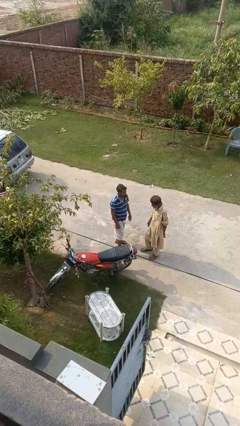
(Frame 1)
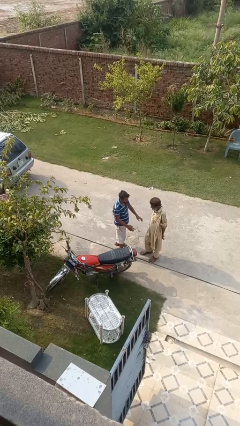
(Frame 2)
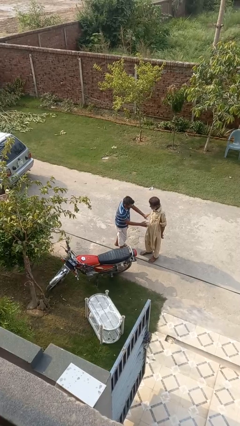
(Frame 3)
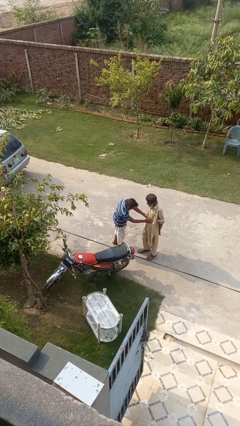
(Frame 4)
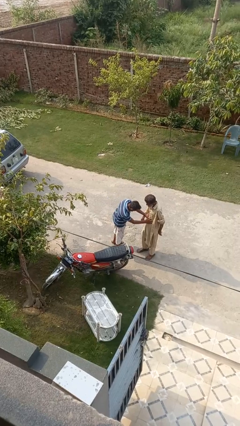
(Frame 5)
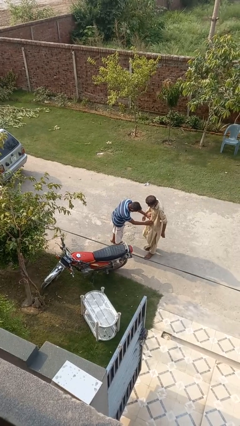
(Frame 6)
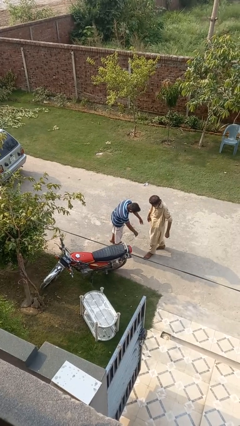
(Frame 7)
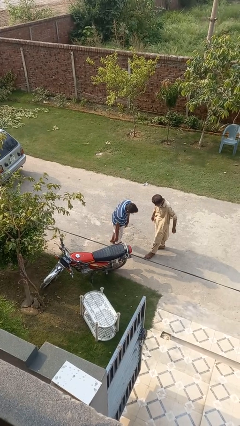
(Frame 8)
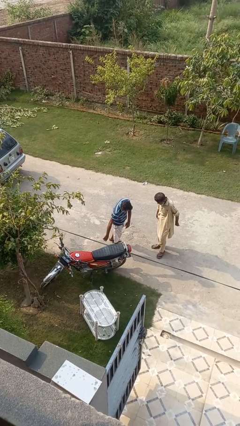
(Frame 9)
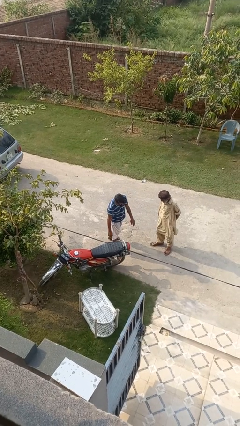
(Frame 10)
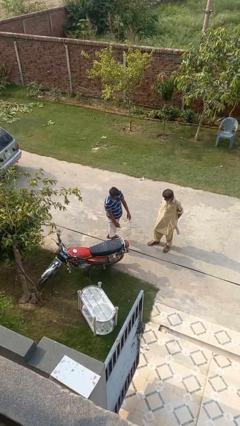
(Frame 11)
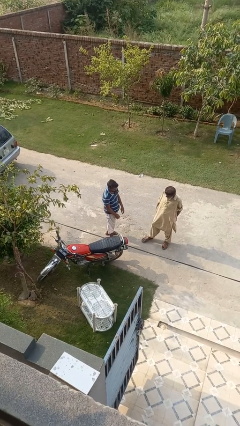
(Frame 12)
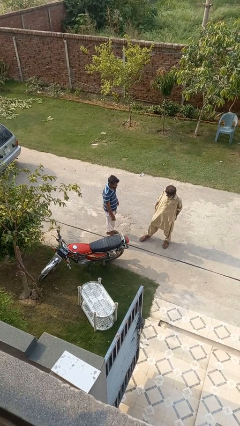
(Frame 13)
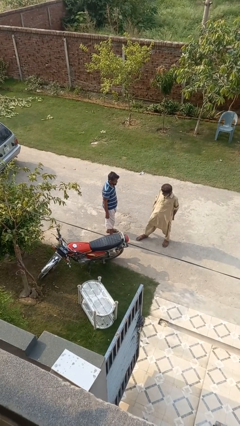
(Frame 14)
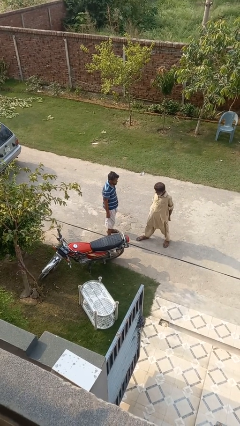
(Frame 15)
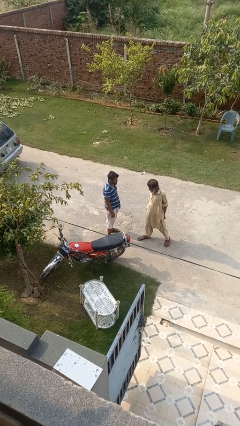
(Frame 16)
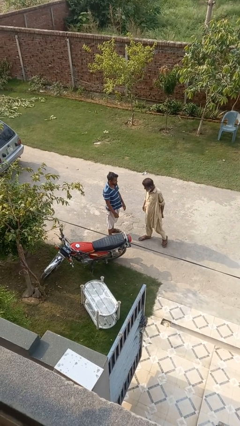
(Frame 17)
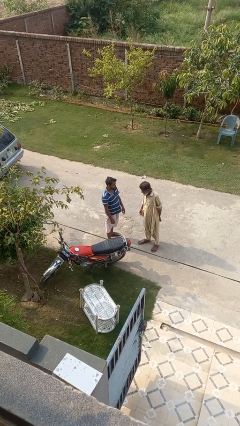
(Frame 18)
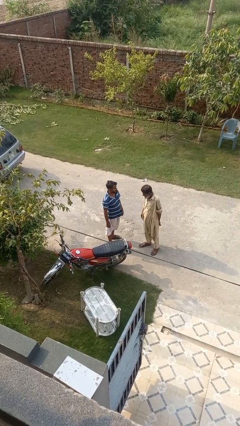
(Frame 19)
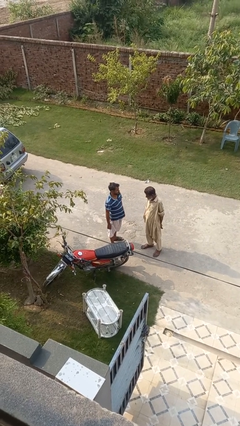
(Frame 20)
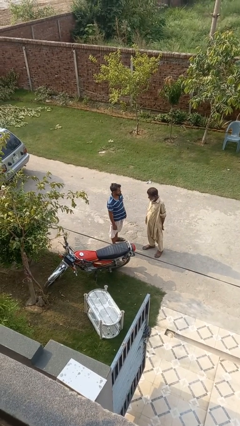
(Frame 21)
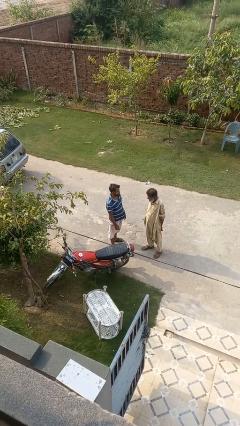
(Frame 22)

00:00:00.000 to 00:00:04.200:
person shoves person

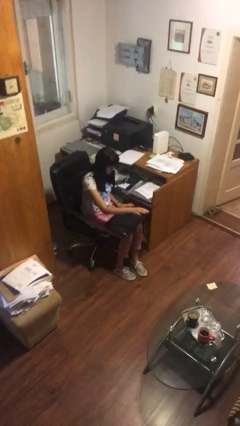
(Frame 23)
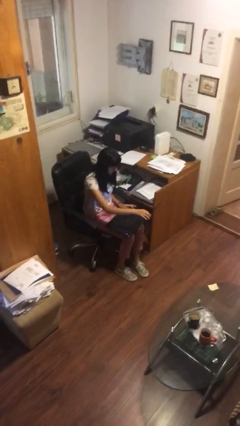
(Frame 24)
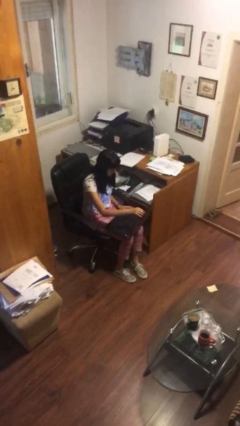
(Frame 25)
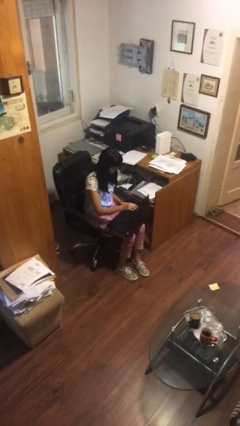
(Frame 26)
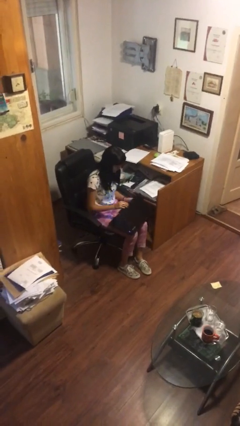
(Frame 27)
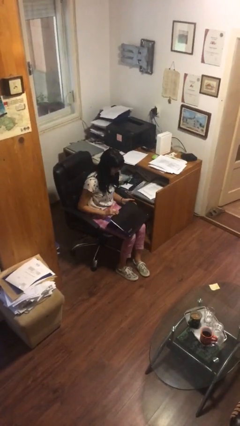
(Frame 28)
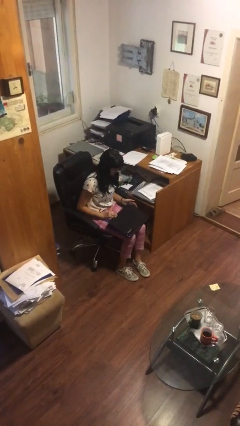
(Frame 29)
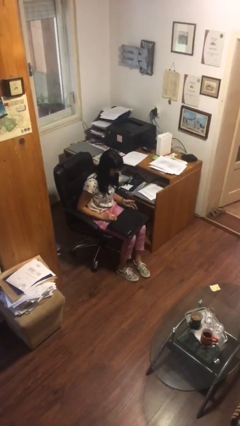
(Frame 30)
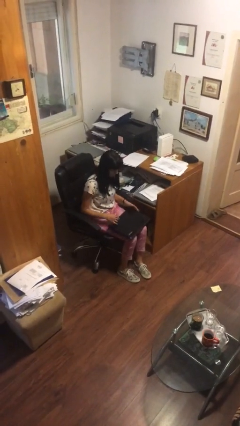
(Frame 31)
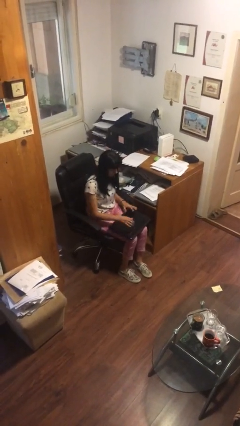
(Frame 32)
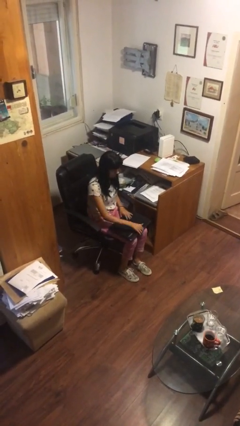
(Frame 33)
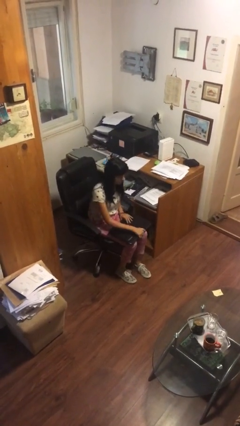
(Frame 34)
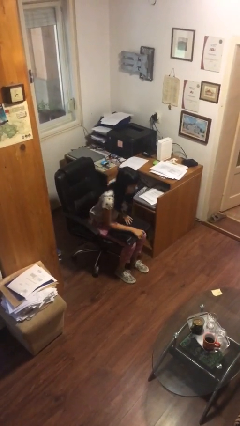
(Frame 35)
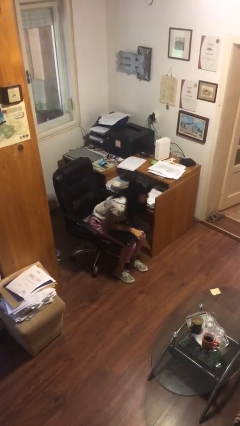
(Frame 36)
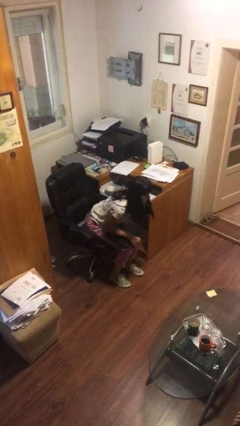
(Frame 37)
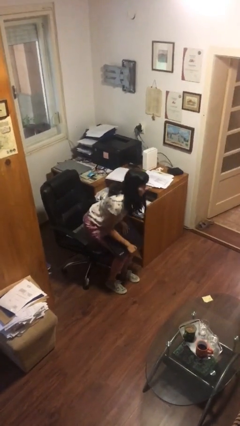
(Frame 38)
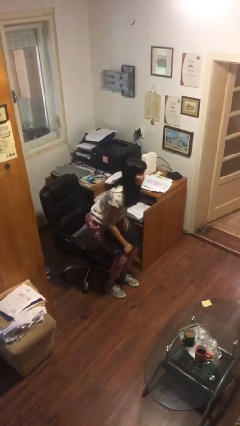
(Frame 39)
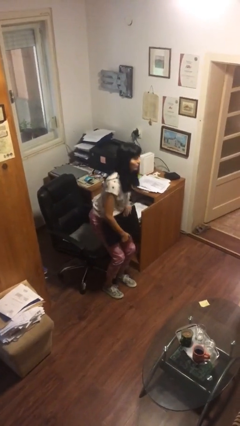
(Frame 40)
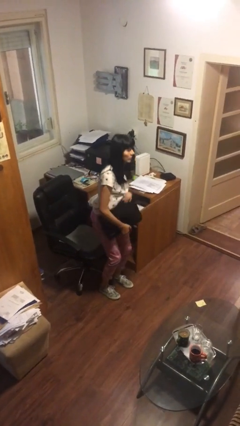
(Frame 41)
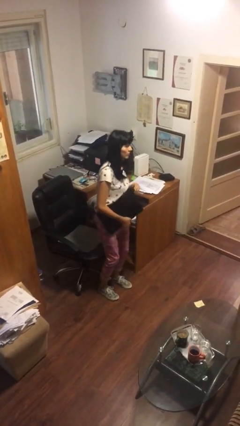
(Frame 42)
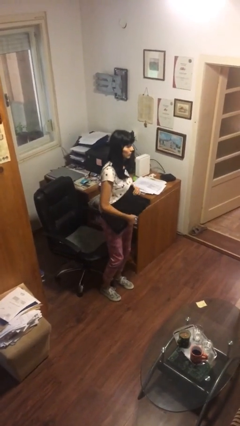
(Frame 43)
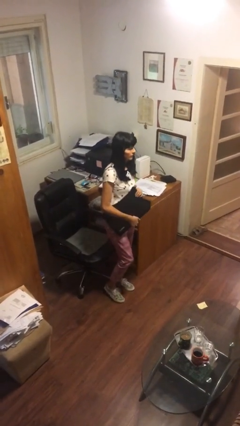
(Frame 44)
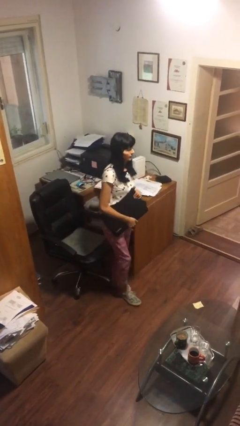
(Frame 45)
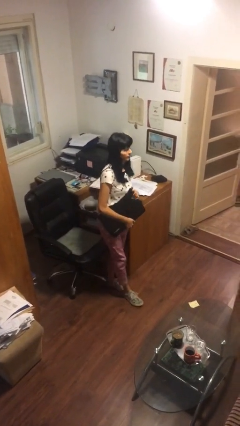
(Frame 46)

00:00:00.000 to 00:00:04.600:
person stands up

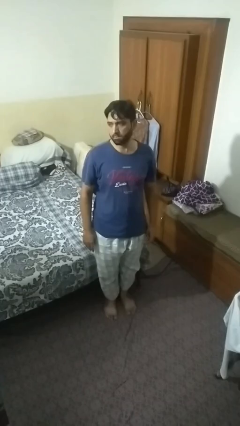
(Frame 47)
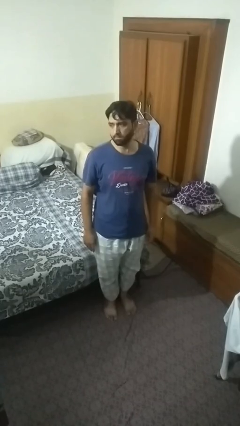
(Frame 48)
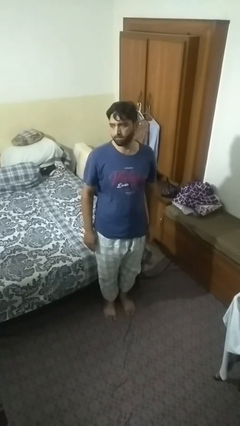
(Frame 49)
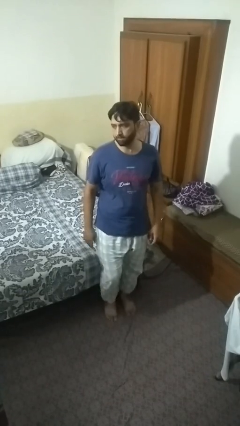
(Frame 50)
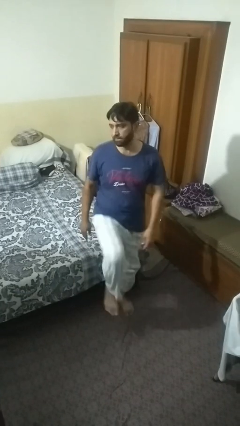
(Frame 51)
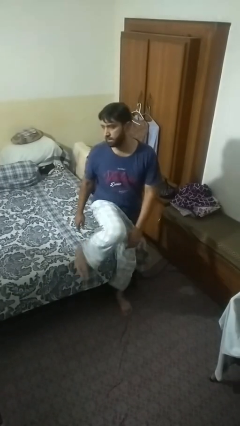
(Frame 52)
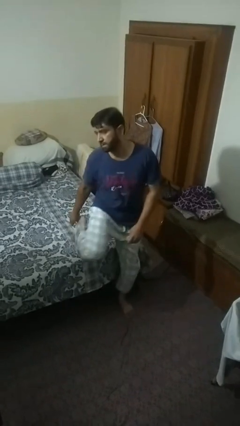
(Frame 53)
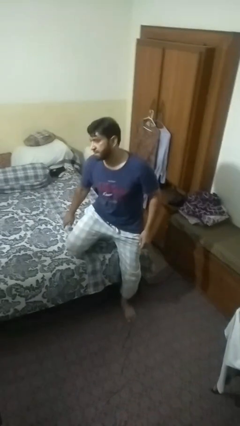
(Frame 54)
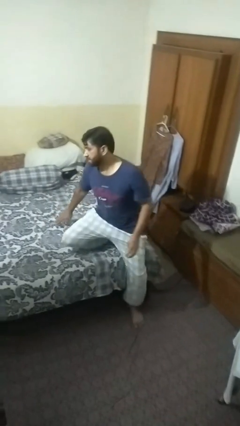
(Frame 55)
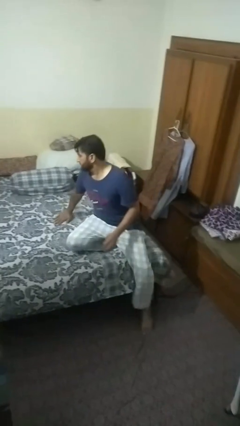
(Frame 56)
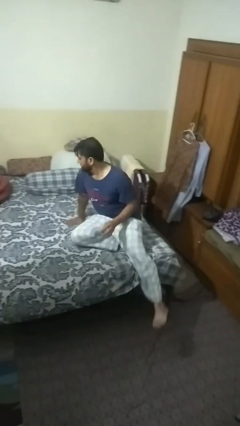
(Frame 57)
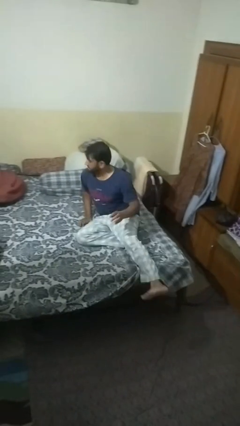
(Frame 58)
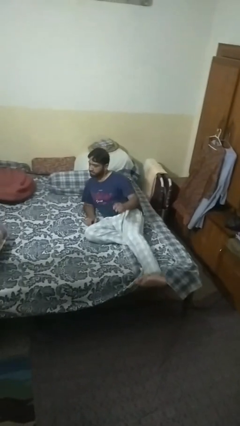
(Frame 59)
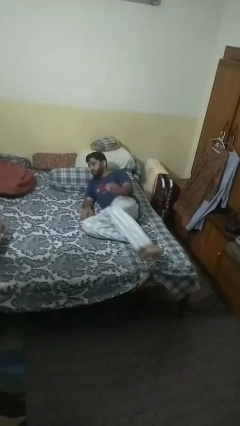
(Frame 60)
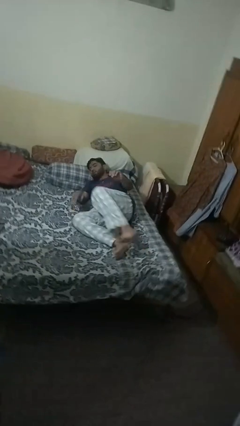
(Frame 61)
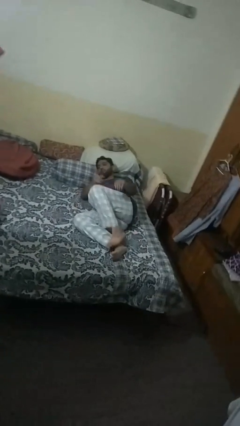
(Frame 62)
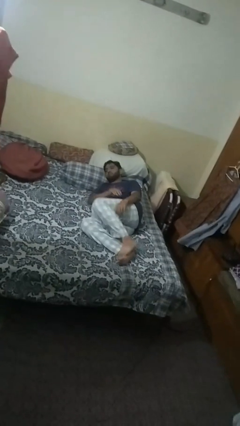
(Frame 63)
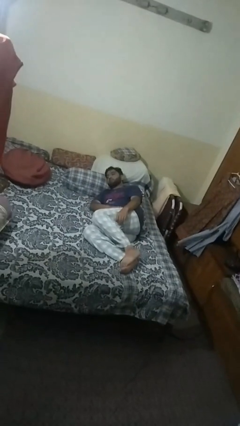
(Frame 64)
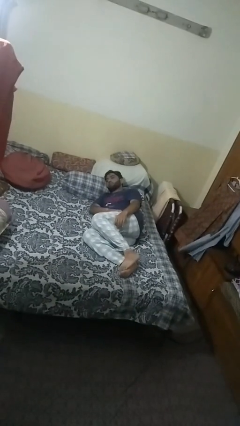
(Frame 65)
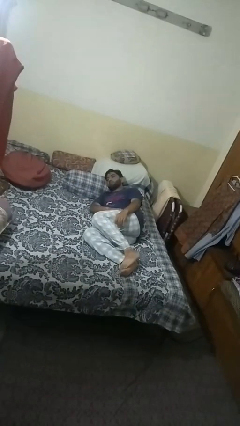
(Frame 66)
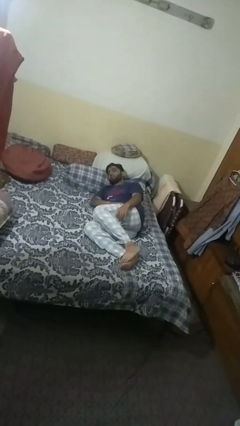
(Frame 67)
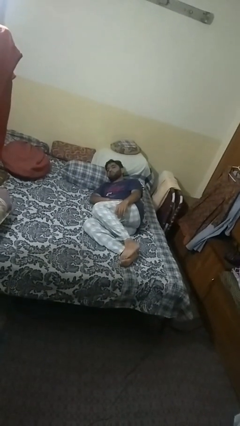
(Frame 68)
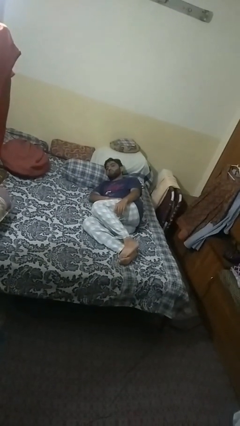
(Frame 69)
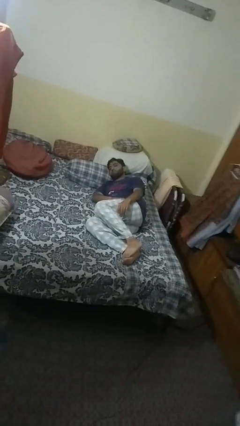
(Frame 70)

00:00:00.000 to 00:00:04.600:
person lies down on bed

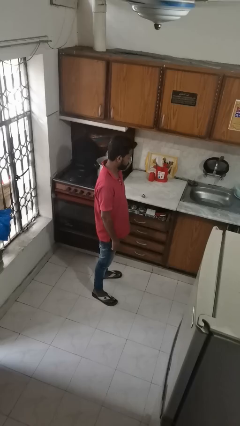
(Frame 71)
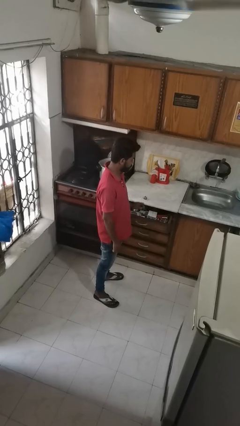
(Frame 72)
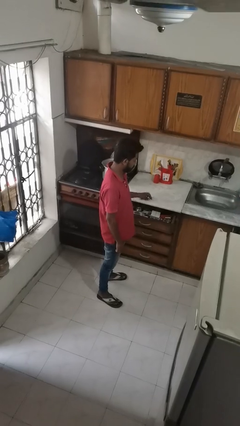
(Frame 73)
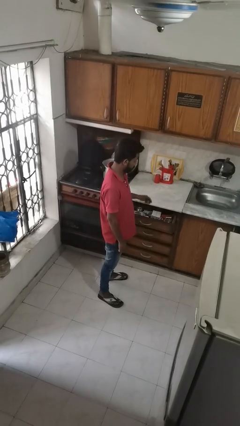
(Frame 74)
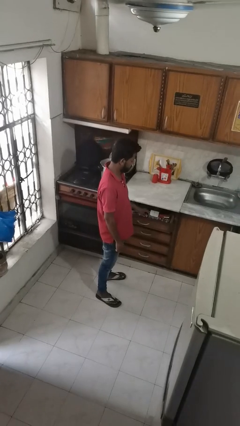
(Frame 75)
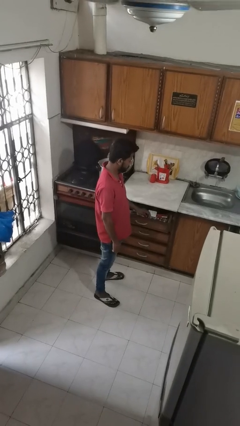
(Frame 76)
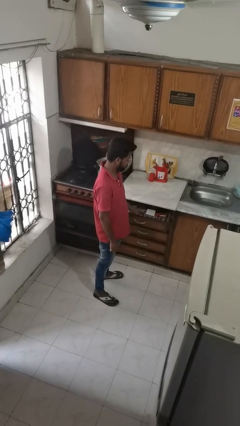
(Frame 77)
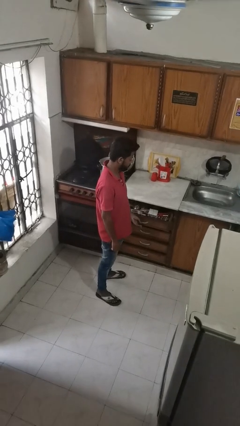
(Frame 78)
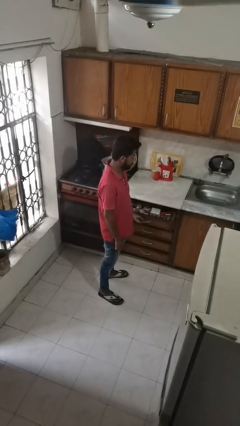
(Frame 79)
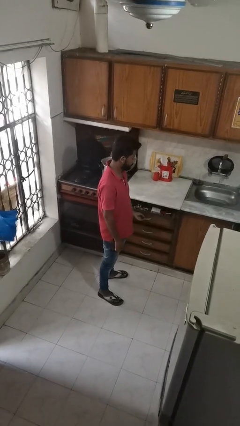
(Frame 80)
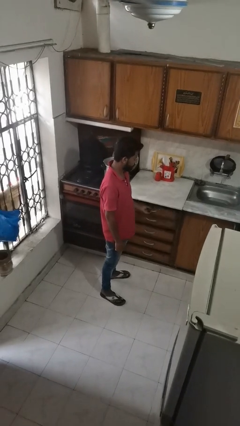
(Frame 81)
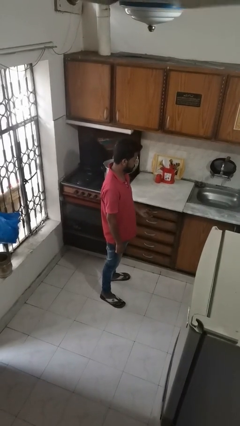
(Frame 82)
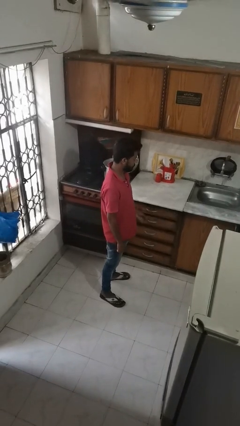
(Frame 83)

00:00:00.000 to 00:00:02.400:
person puts object into kitchen drawer

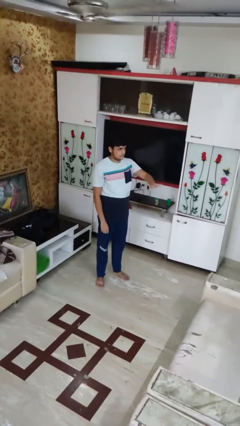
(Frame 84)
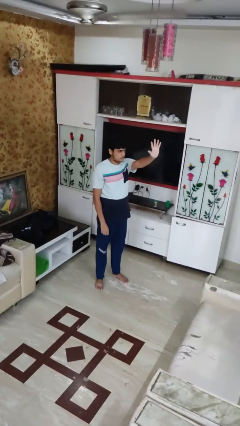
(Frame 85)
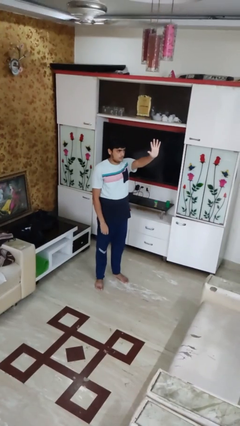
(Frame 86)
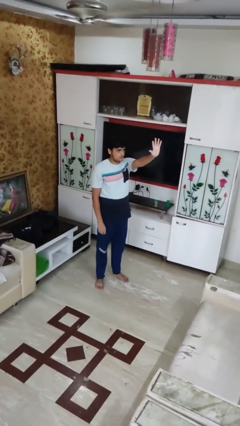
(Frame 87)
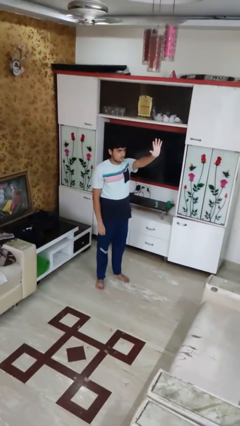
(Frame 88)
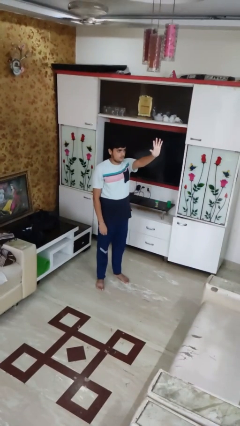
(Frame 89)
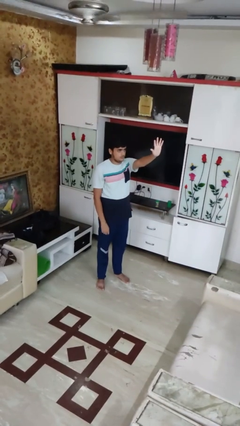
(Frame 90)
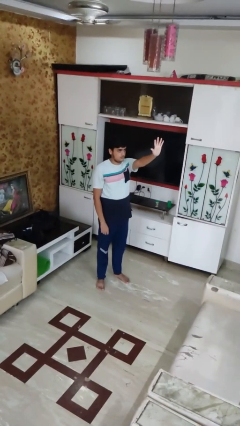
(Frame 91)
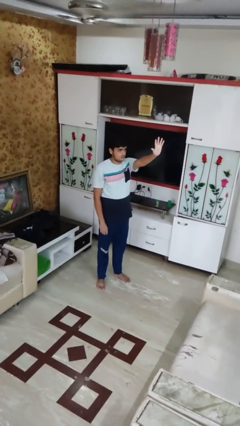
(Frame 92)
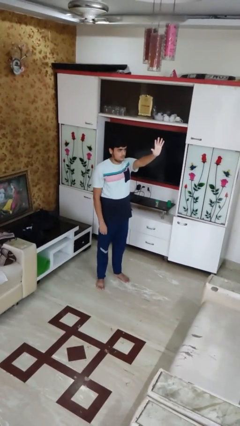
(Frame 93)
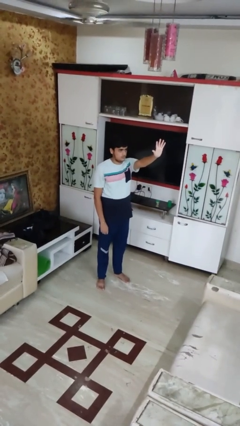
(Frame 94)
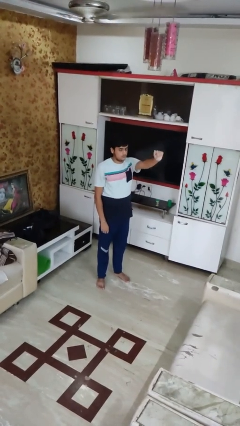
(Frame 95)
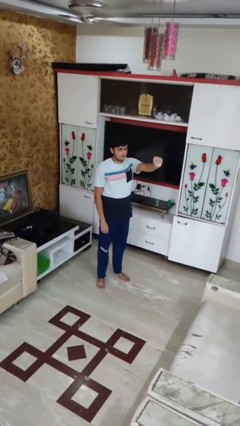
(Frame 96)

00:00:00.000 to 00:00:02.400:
person gestures number five
